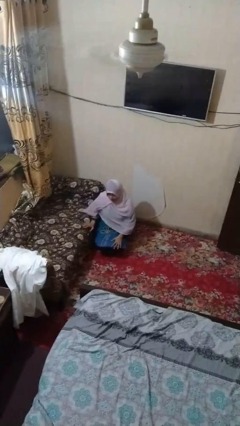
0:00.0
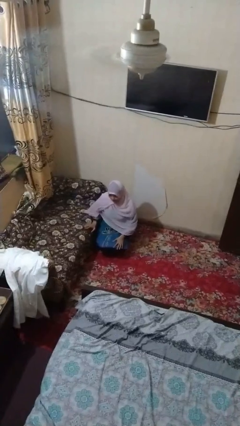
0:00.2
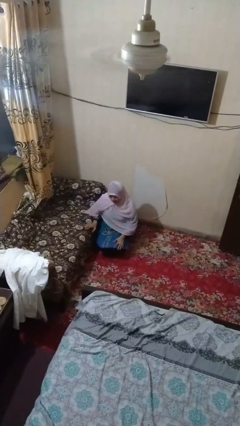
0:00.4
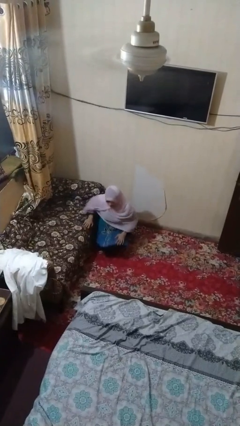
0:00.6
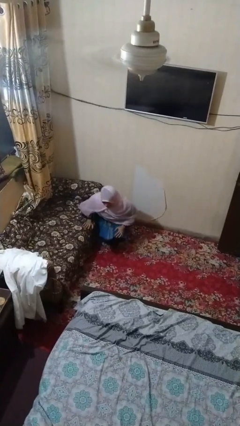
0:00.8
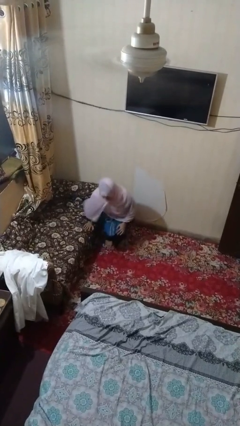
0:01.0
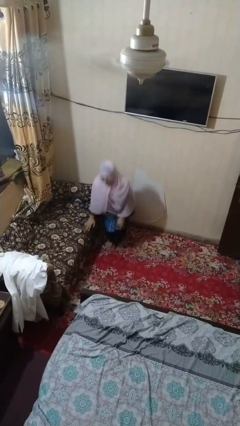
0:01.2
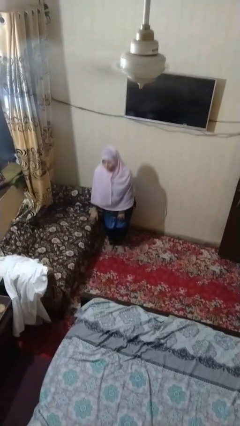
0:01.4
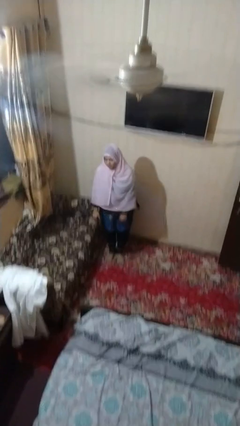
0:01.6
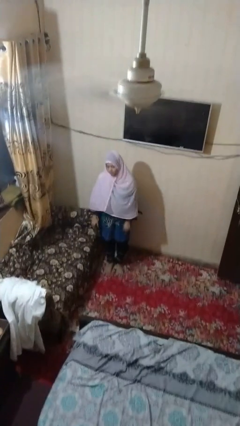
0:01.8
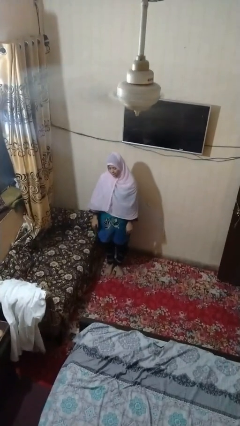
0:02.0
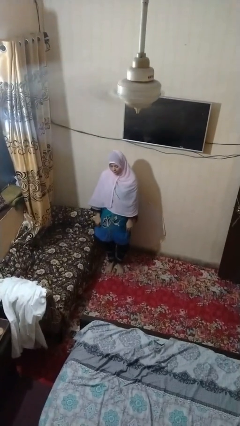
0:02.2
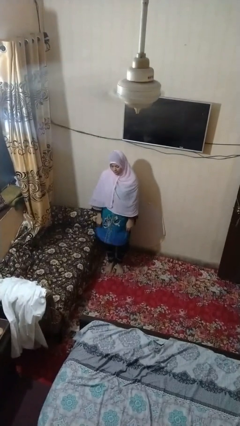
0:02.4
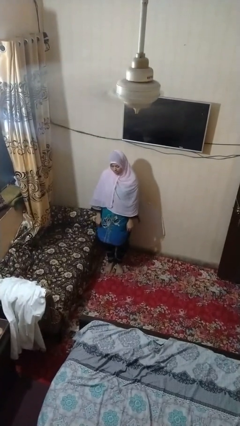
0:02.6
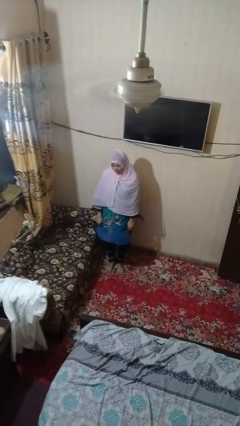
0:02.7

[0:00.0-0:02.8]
person stands up

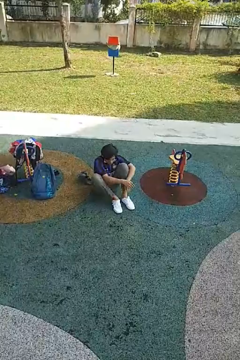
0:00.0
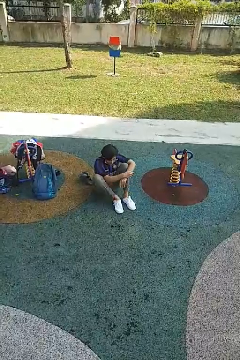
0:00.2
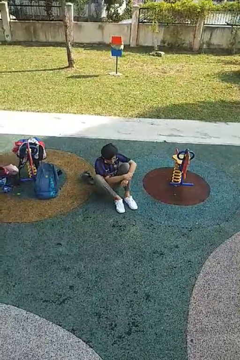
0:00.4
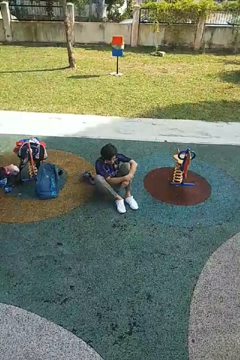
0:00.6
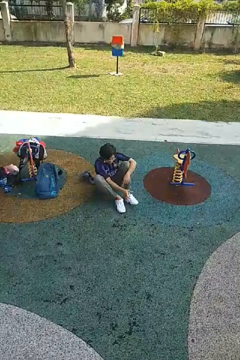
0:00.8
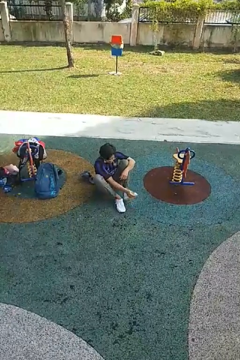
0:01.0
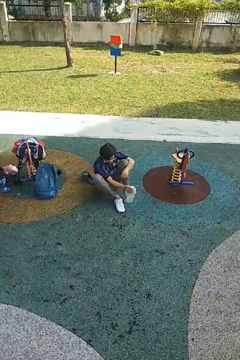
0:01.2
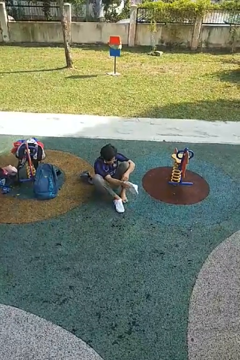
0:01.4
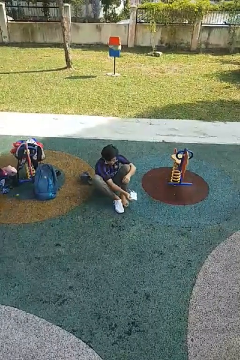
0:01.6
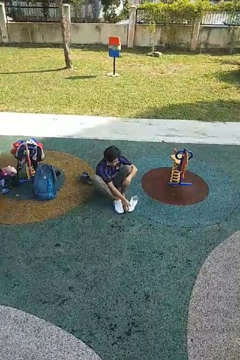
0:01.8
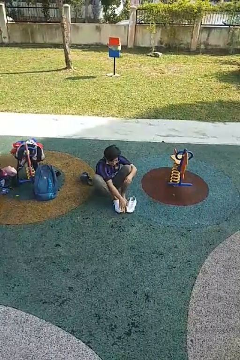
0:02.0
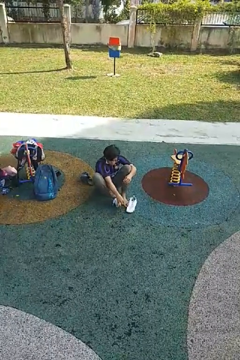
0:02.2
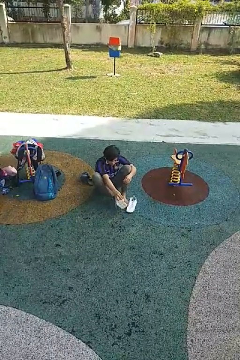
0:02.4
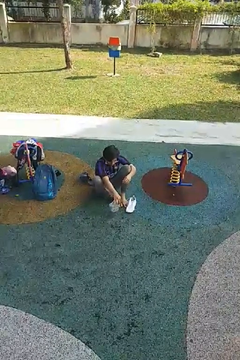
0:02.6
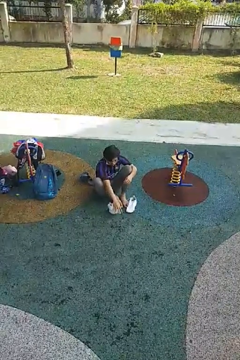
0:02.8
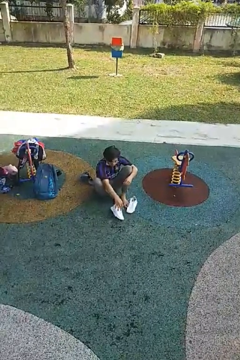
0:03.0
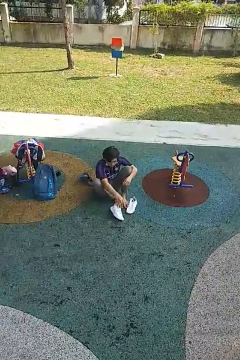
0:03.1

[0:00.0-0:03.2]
person takes off shoes

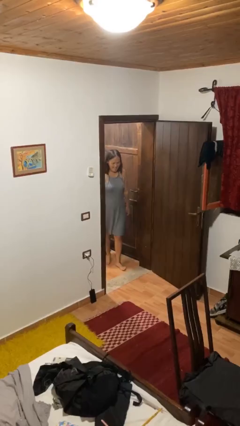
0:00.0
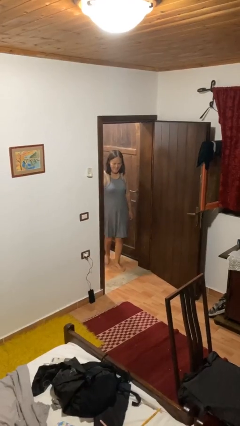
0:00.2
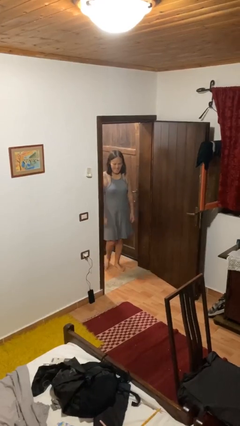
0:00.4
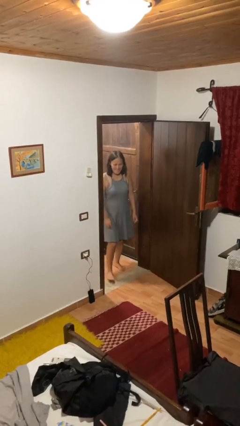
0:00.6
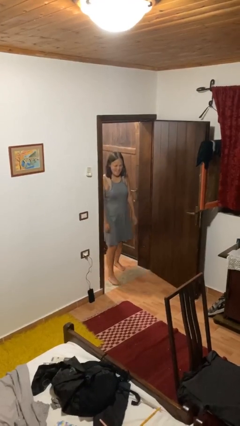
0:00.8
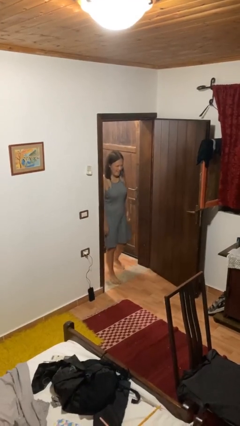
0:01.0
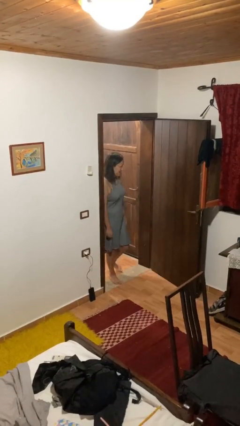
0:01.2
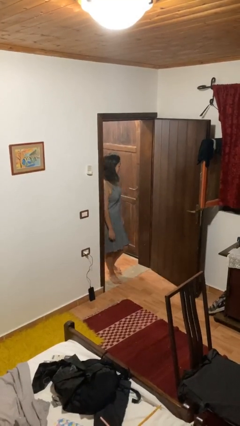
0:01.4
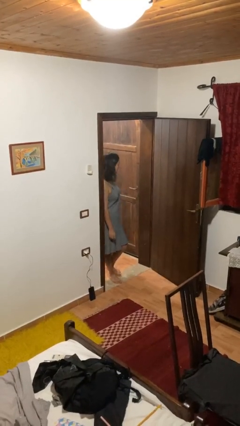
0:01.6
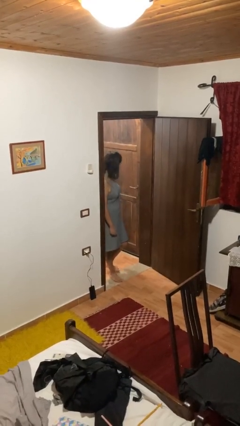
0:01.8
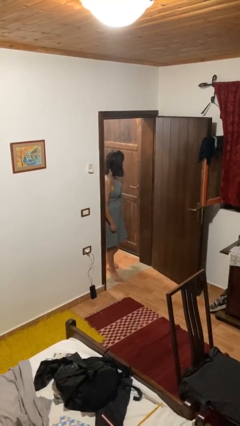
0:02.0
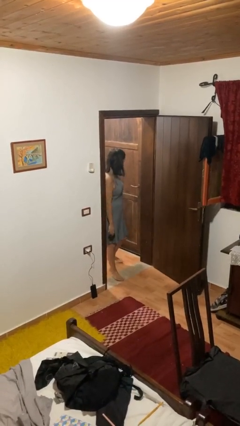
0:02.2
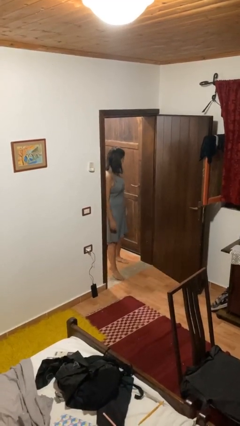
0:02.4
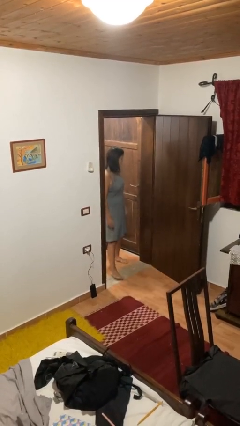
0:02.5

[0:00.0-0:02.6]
person bumps into wall

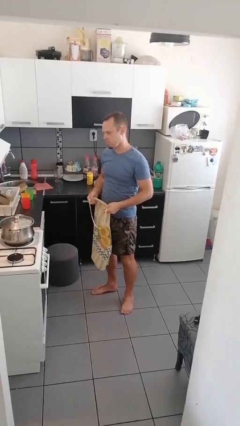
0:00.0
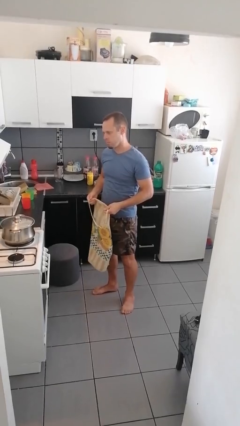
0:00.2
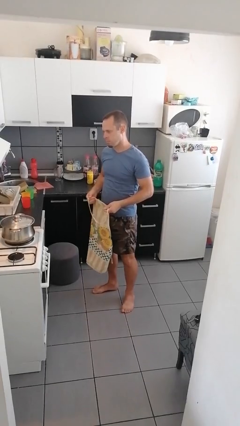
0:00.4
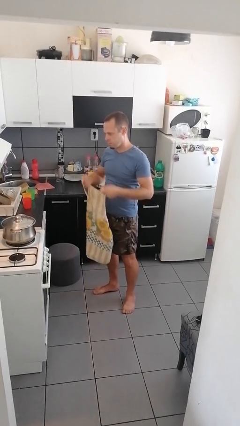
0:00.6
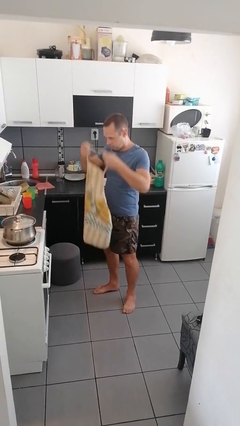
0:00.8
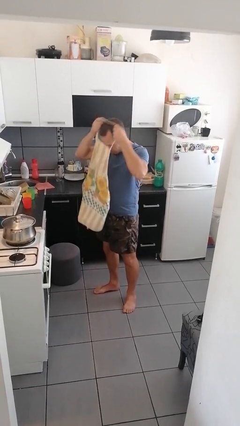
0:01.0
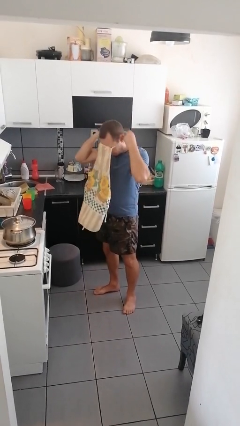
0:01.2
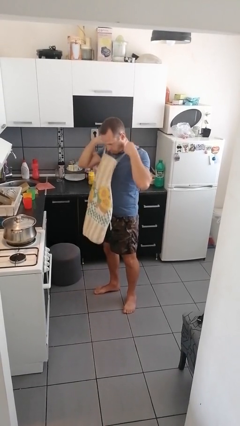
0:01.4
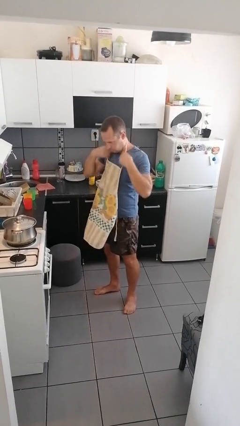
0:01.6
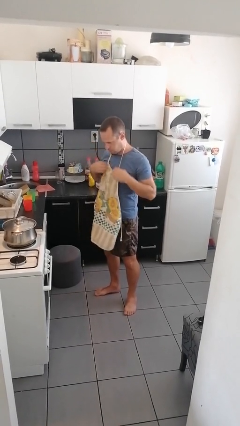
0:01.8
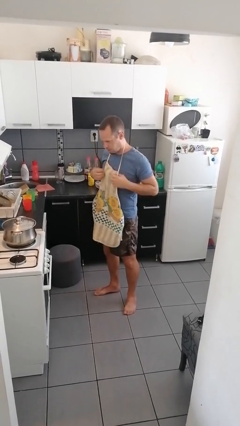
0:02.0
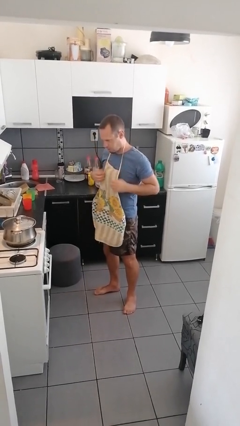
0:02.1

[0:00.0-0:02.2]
person puts on apron

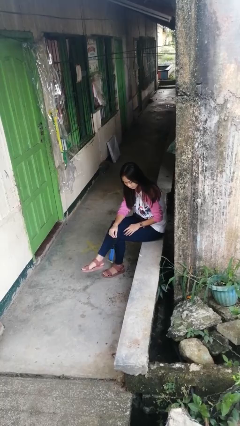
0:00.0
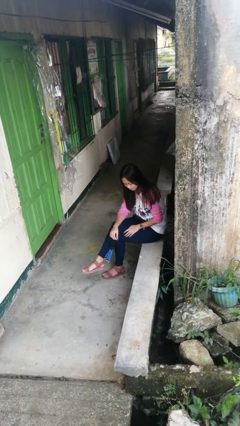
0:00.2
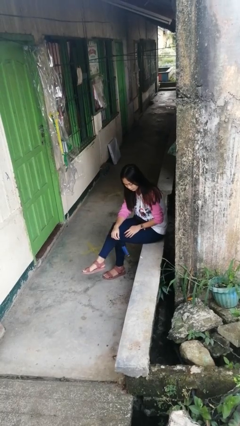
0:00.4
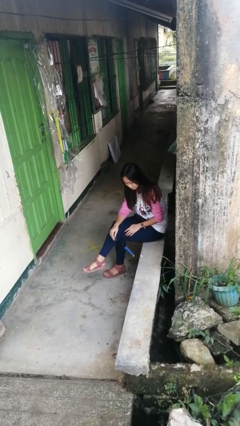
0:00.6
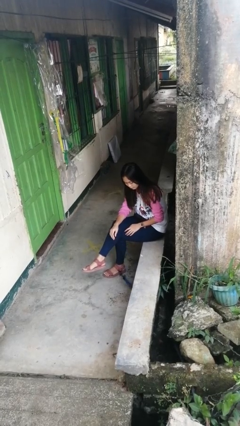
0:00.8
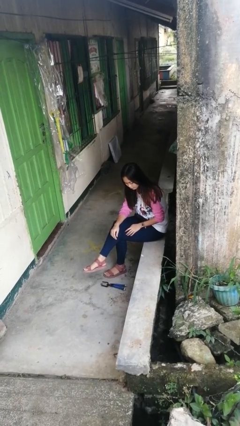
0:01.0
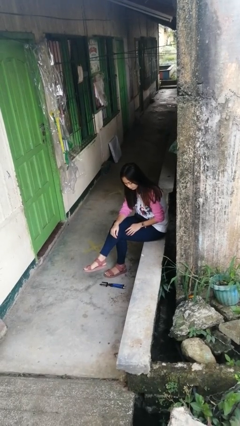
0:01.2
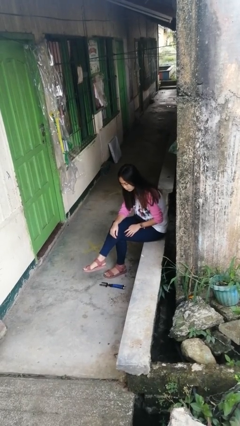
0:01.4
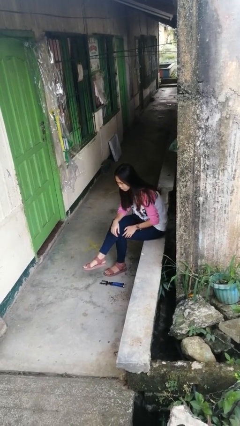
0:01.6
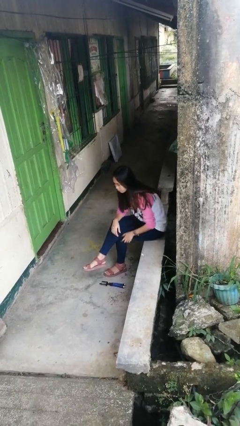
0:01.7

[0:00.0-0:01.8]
person drops object

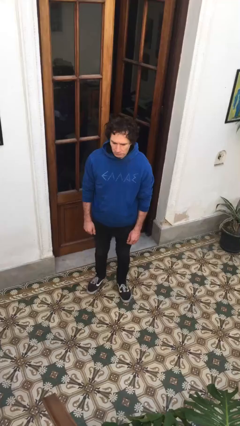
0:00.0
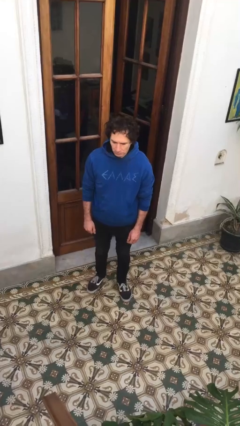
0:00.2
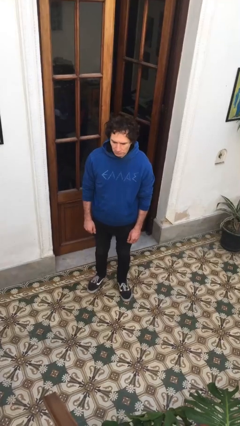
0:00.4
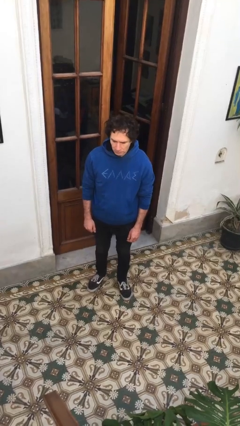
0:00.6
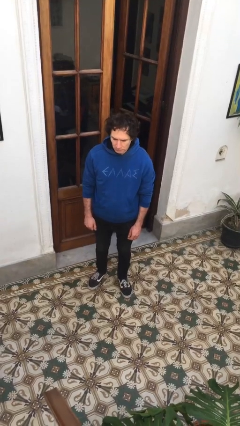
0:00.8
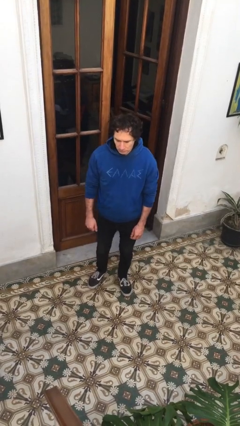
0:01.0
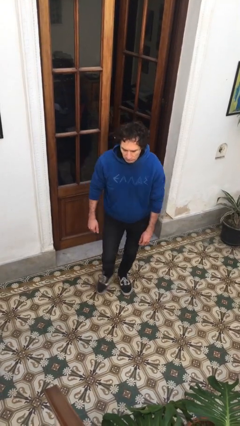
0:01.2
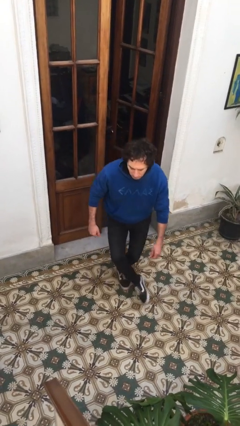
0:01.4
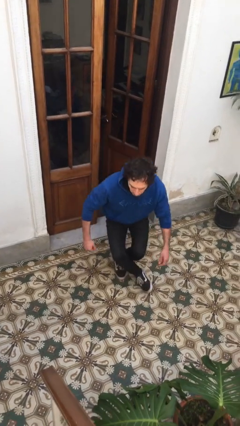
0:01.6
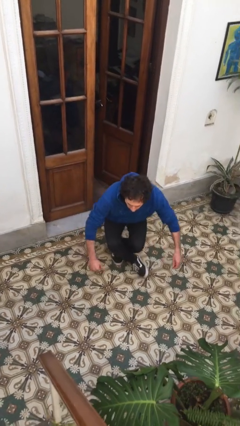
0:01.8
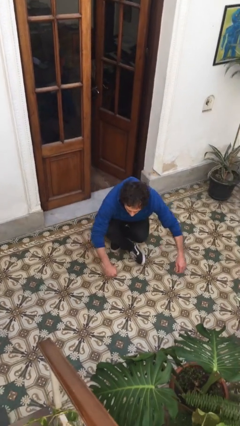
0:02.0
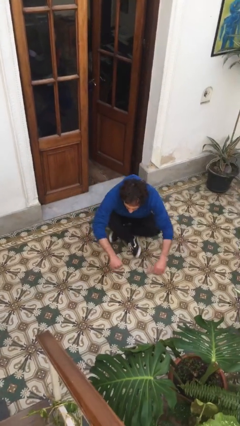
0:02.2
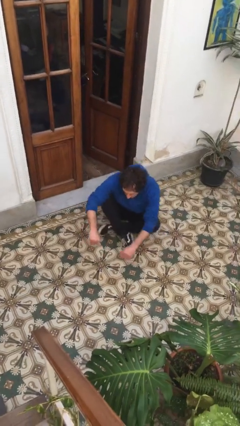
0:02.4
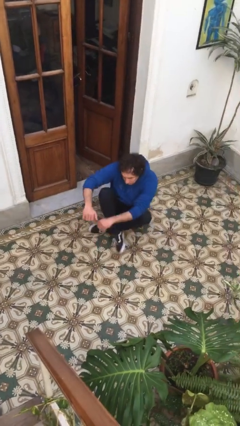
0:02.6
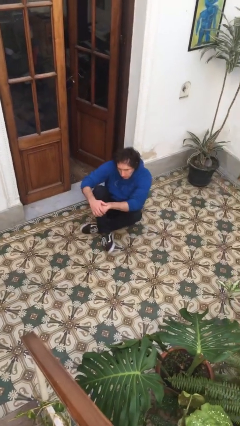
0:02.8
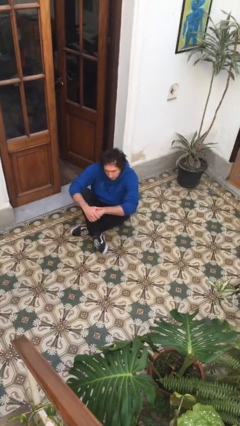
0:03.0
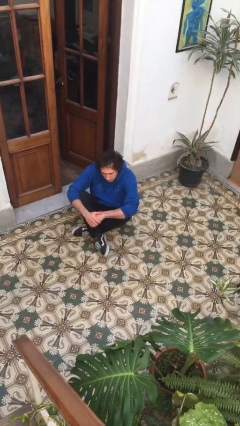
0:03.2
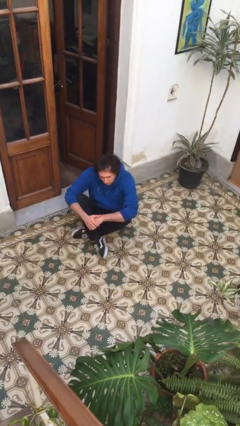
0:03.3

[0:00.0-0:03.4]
person sits crisscross

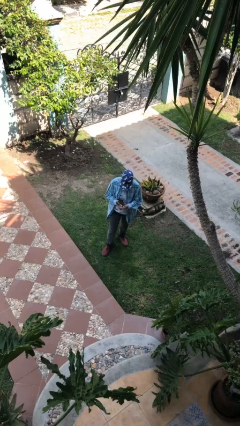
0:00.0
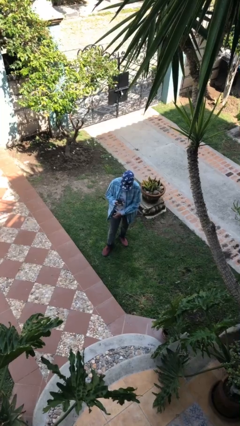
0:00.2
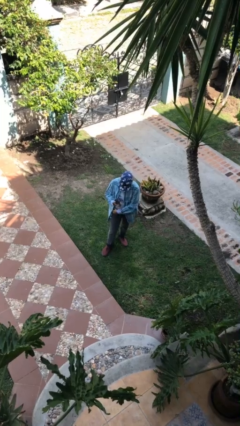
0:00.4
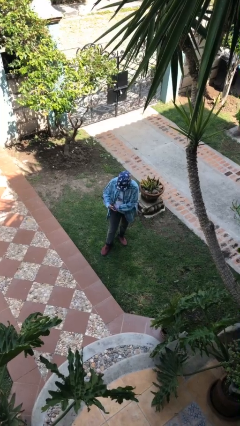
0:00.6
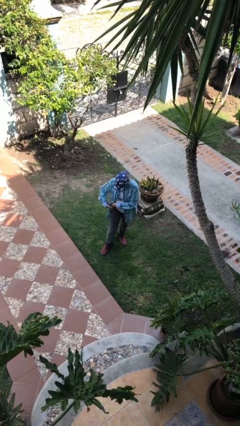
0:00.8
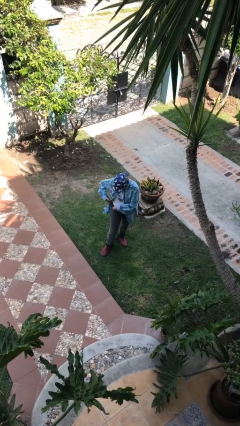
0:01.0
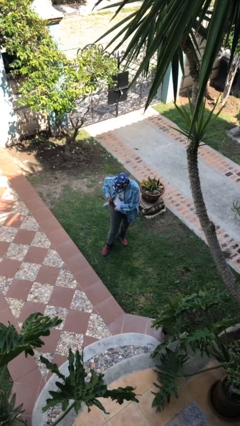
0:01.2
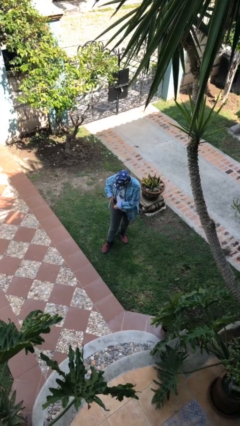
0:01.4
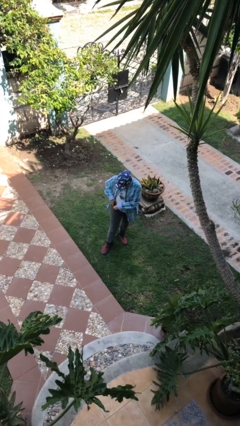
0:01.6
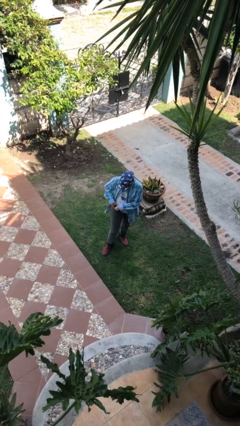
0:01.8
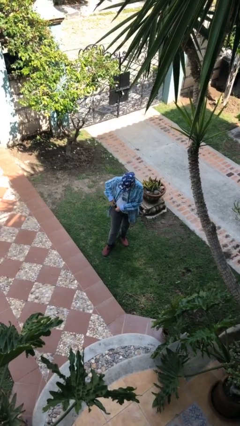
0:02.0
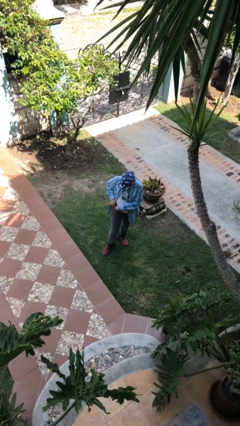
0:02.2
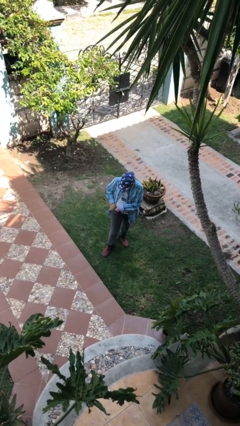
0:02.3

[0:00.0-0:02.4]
person puts phone into pocket
